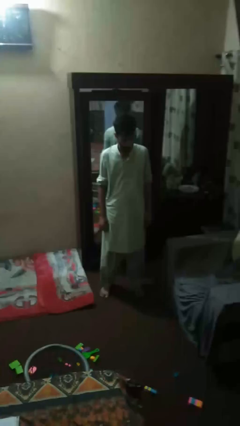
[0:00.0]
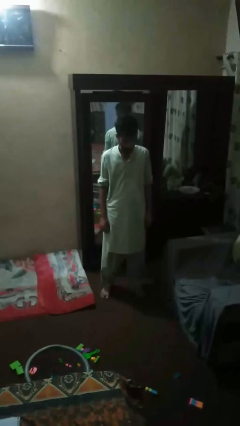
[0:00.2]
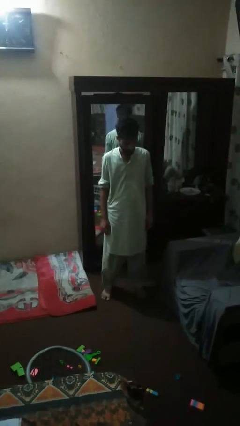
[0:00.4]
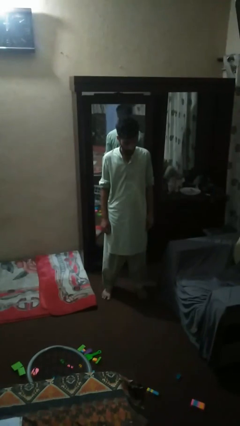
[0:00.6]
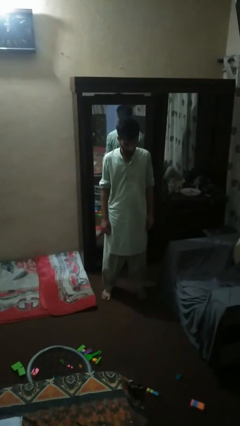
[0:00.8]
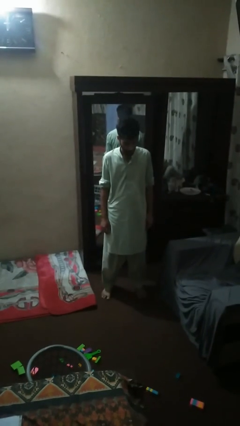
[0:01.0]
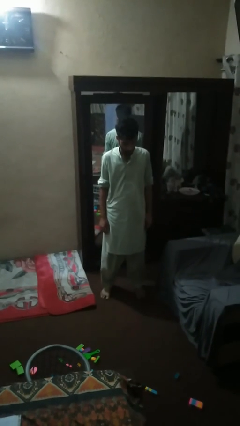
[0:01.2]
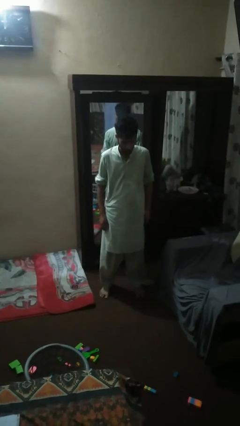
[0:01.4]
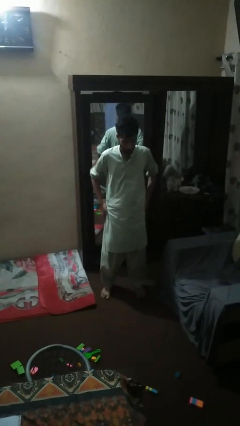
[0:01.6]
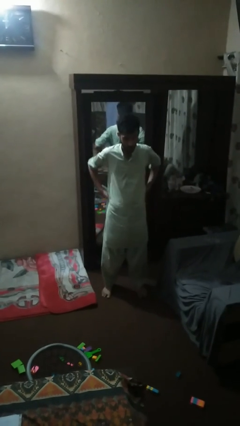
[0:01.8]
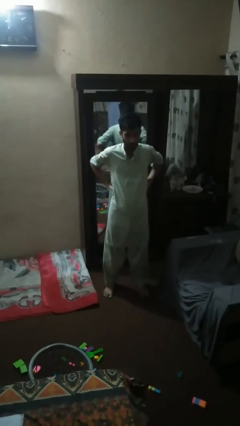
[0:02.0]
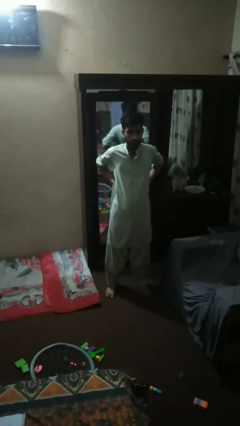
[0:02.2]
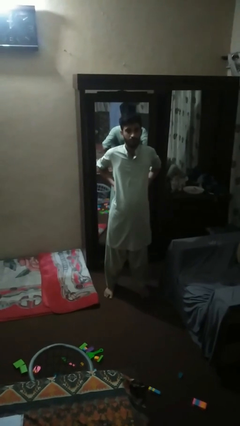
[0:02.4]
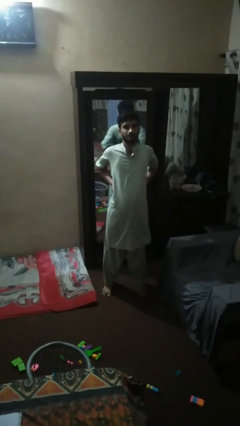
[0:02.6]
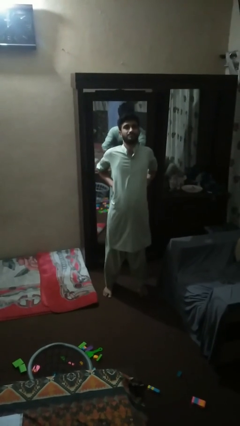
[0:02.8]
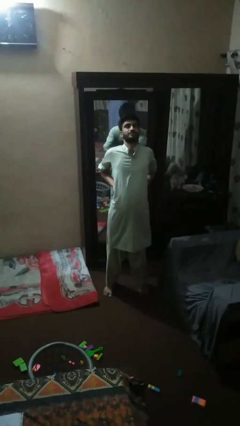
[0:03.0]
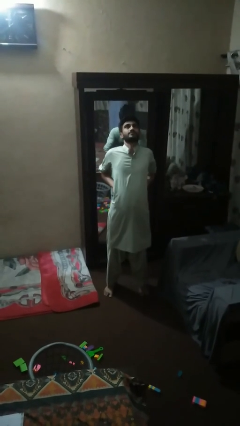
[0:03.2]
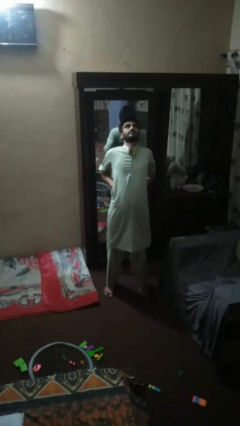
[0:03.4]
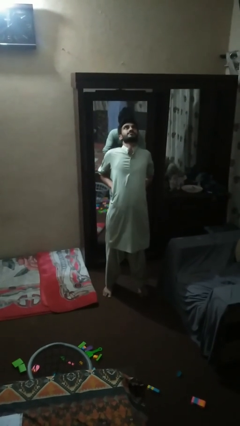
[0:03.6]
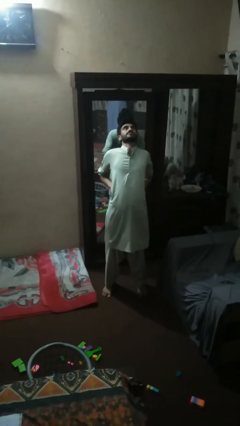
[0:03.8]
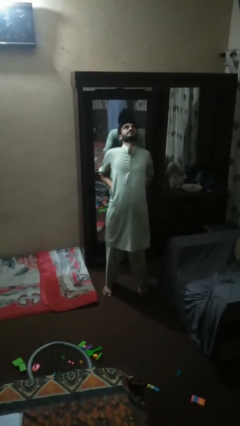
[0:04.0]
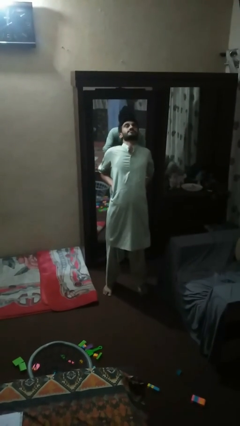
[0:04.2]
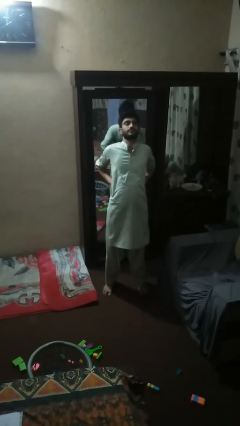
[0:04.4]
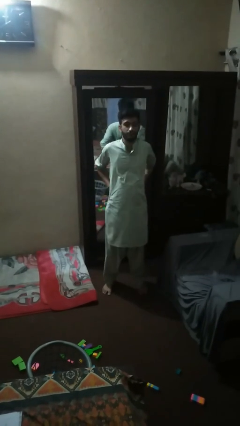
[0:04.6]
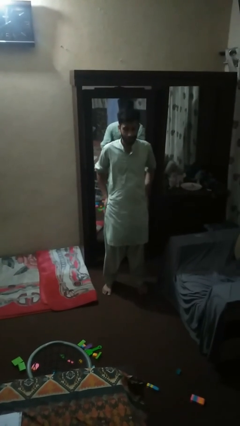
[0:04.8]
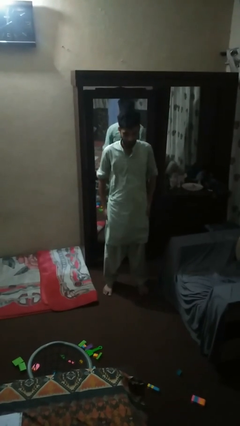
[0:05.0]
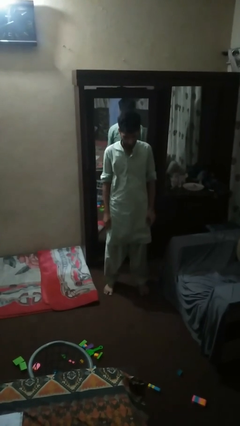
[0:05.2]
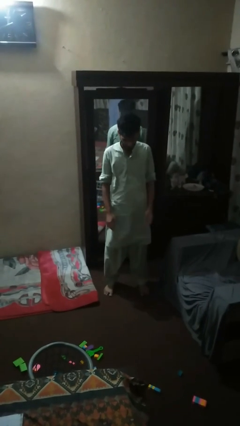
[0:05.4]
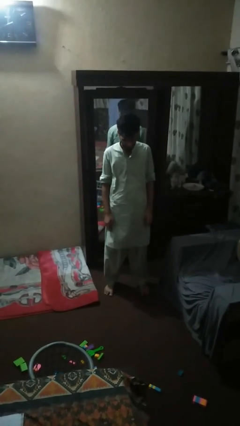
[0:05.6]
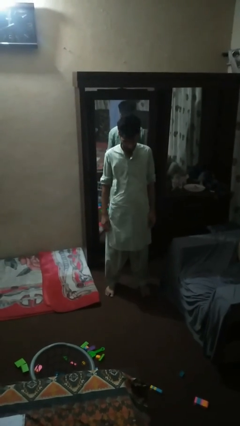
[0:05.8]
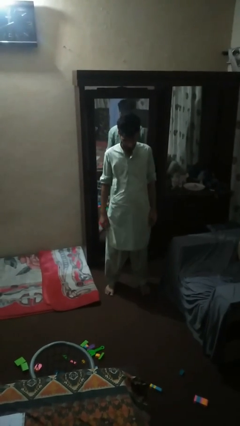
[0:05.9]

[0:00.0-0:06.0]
person stretches back

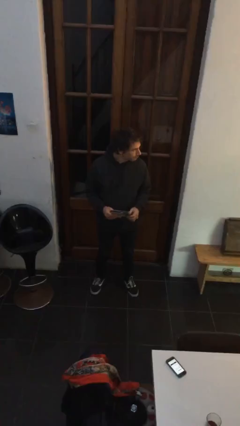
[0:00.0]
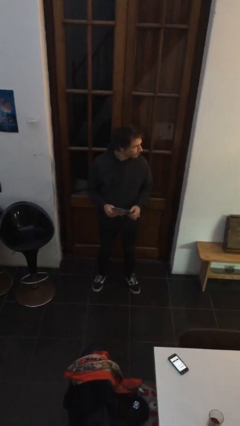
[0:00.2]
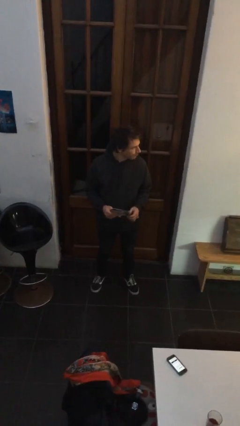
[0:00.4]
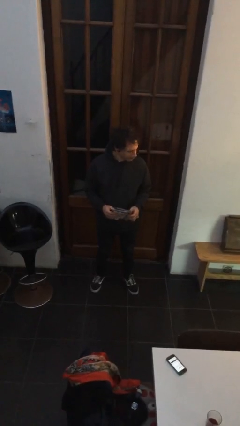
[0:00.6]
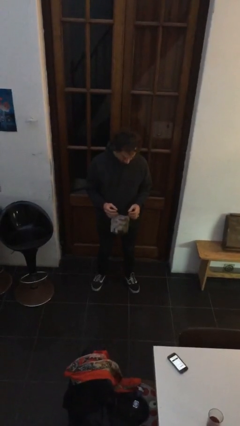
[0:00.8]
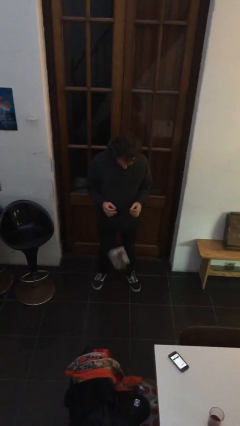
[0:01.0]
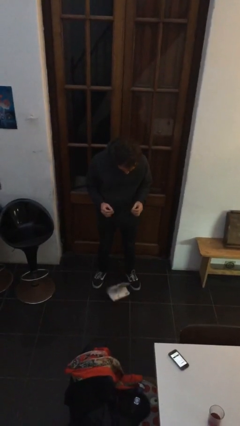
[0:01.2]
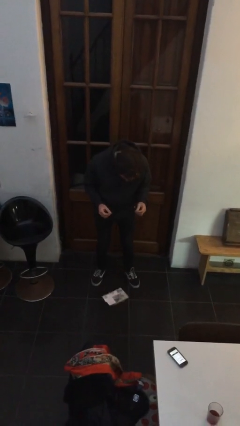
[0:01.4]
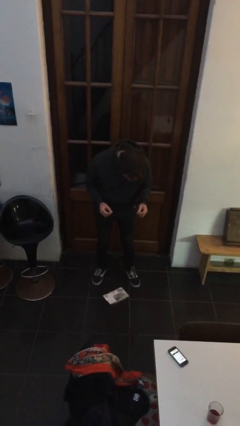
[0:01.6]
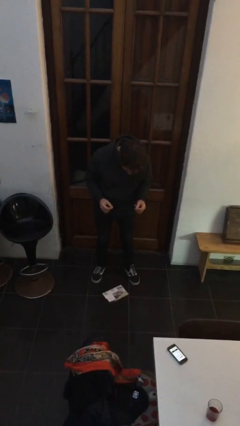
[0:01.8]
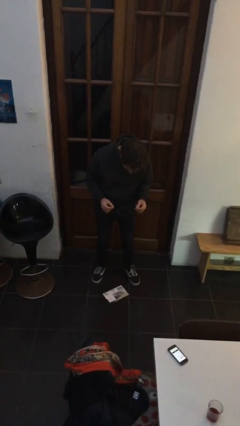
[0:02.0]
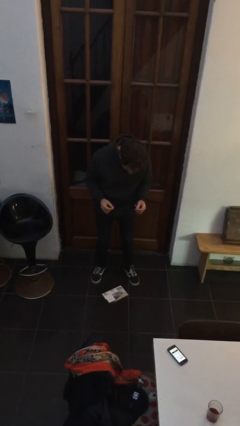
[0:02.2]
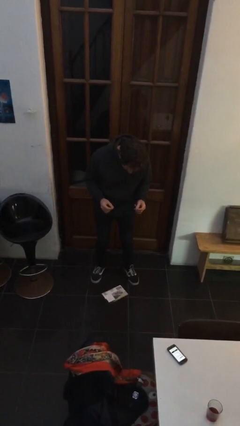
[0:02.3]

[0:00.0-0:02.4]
person drops object

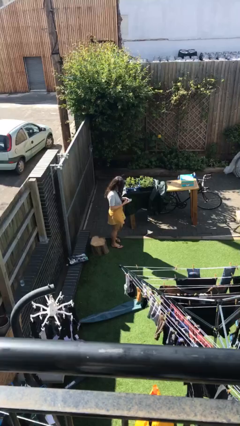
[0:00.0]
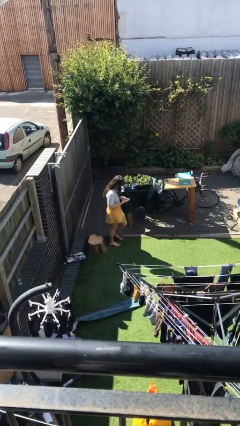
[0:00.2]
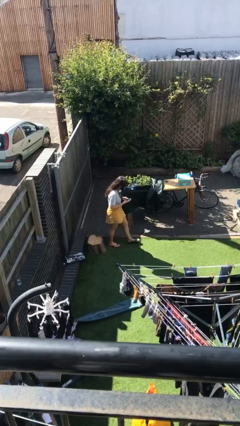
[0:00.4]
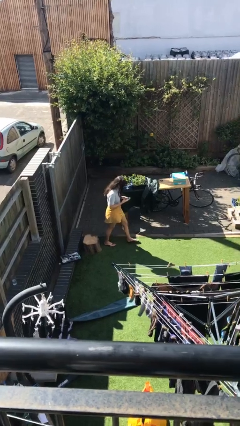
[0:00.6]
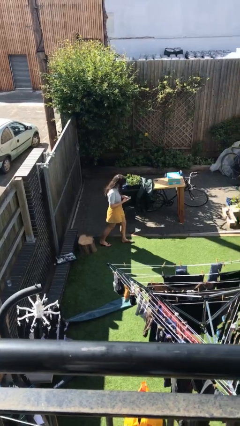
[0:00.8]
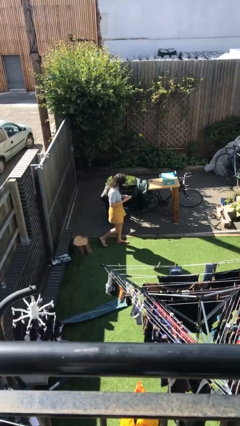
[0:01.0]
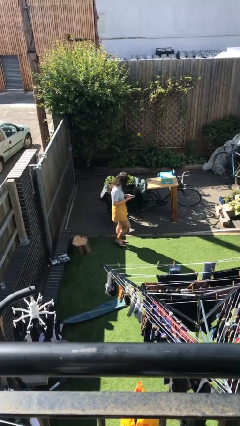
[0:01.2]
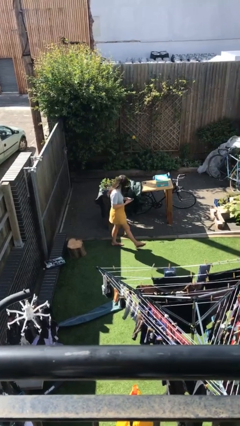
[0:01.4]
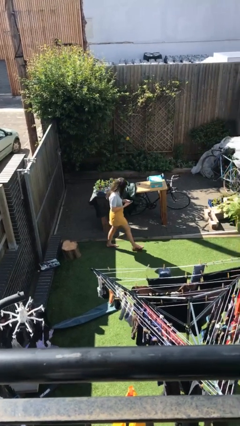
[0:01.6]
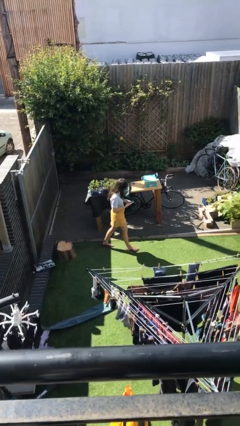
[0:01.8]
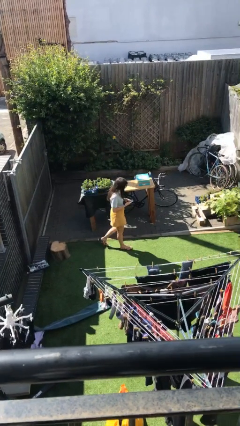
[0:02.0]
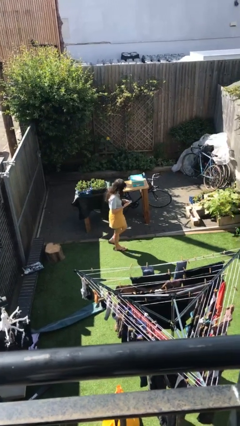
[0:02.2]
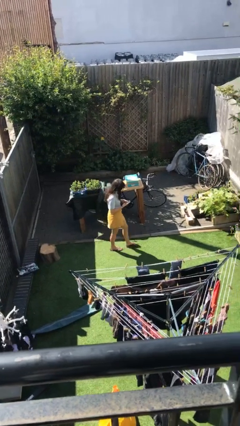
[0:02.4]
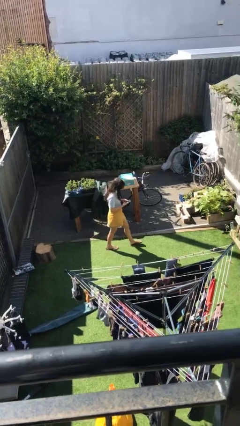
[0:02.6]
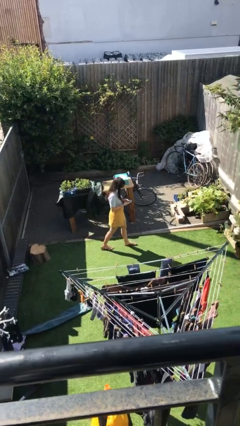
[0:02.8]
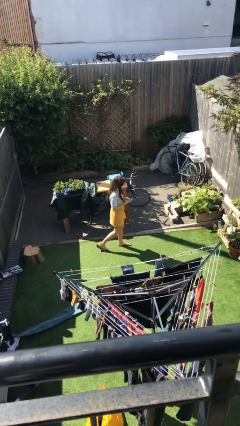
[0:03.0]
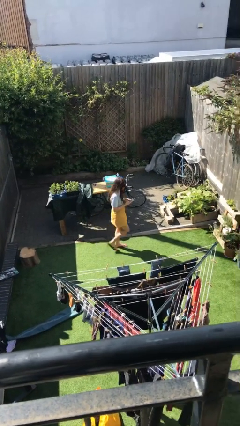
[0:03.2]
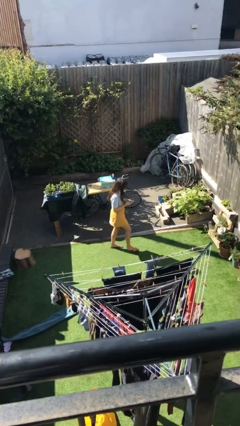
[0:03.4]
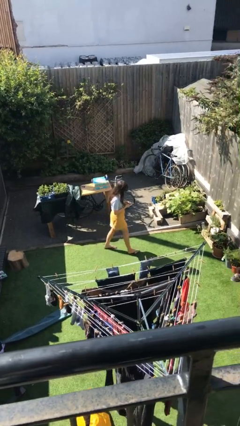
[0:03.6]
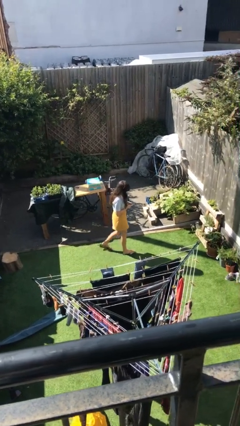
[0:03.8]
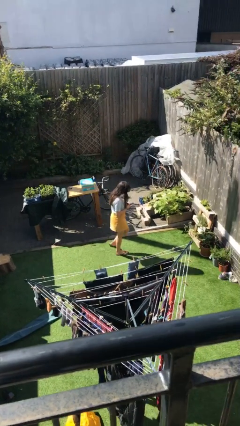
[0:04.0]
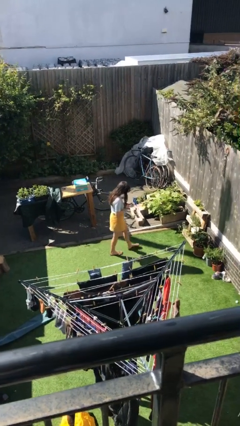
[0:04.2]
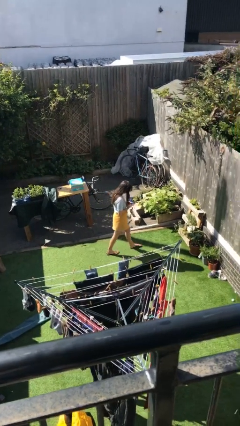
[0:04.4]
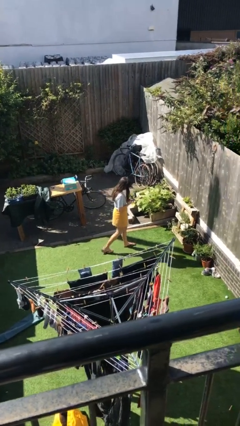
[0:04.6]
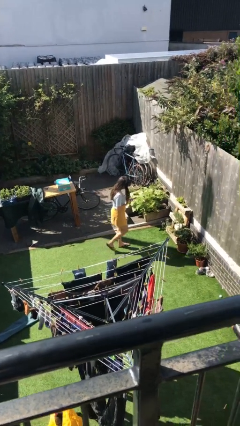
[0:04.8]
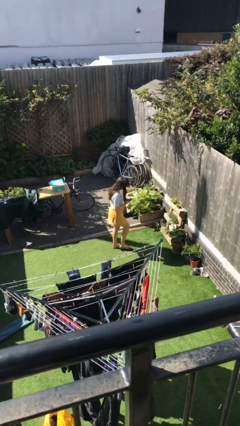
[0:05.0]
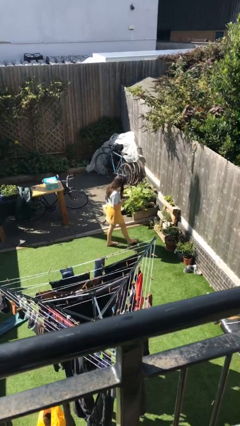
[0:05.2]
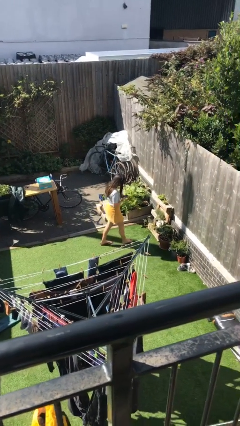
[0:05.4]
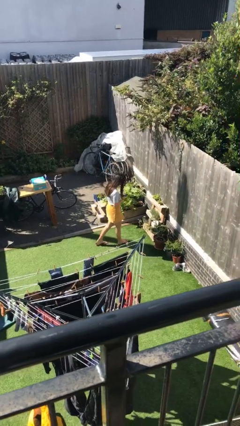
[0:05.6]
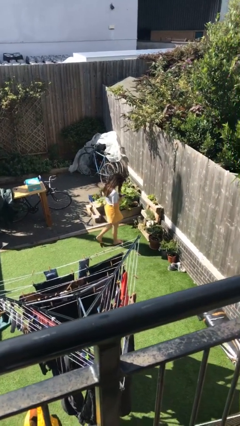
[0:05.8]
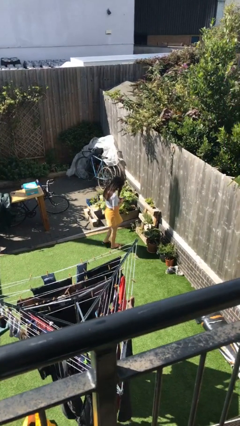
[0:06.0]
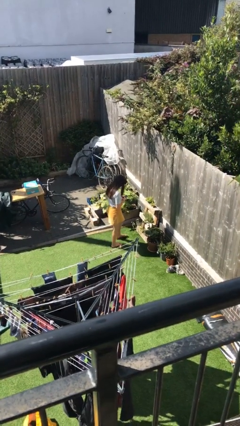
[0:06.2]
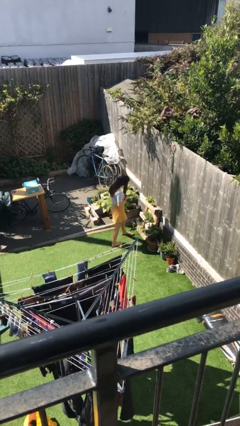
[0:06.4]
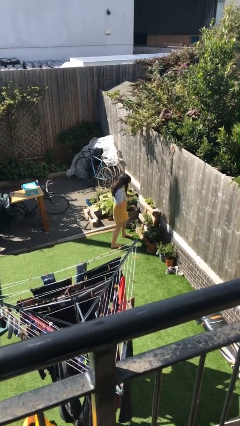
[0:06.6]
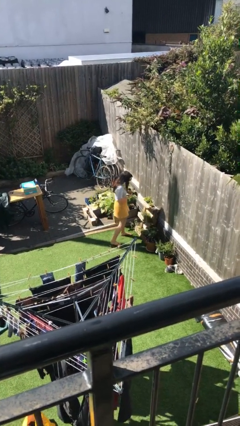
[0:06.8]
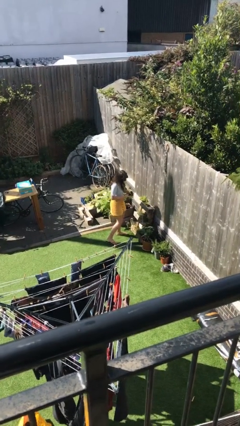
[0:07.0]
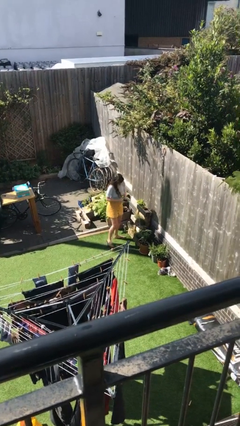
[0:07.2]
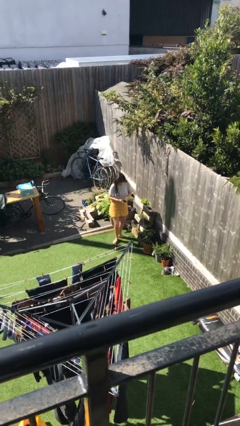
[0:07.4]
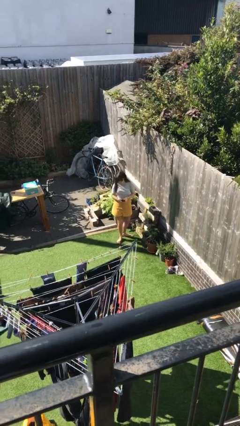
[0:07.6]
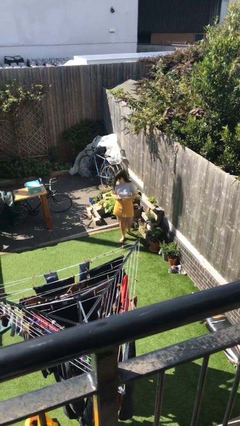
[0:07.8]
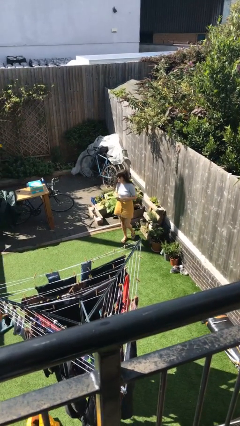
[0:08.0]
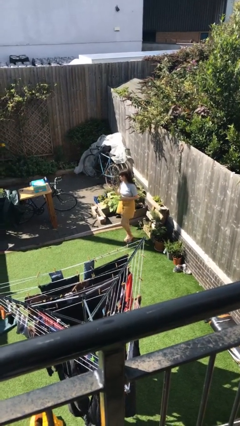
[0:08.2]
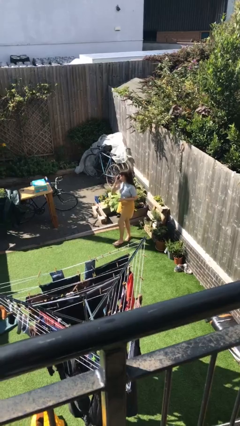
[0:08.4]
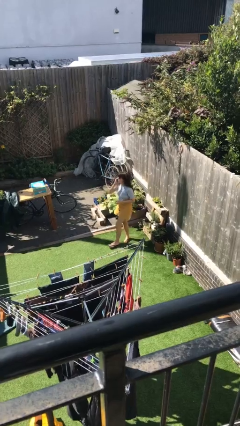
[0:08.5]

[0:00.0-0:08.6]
person texts on phone

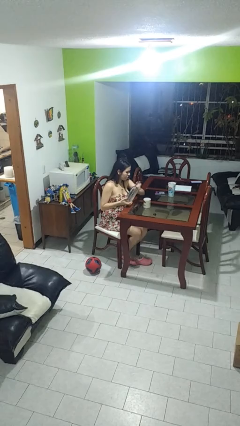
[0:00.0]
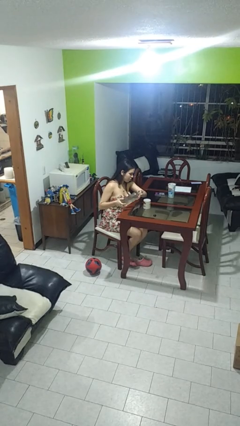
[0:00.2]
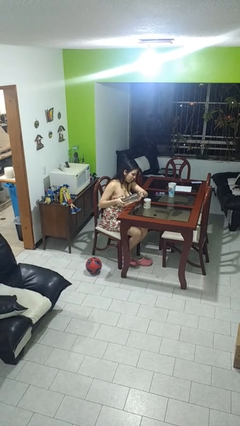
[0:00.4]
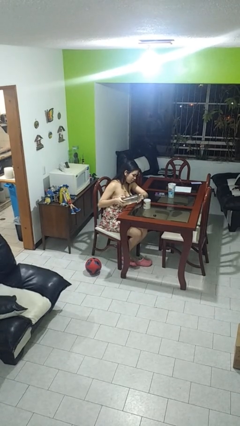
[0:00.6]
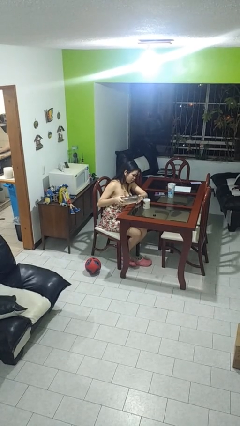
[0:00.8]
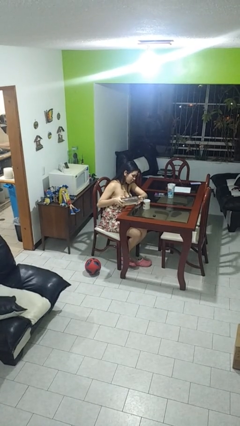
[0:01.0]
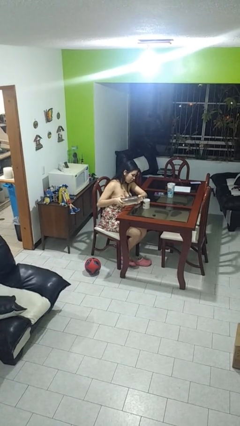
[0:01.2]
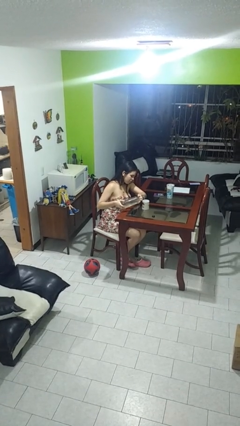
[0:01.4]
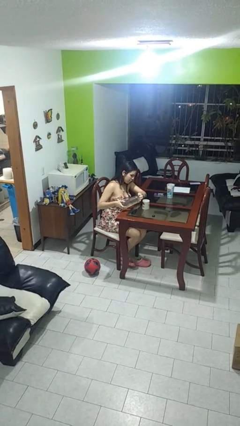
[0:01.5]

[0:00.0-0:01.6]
person pours liquid into cup
